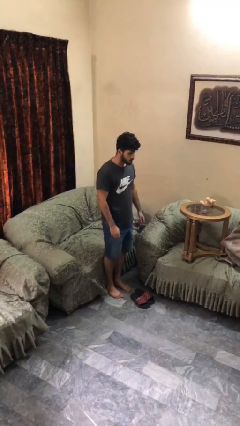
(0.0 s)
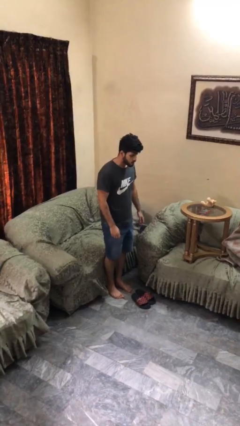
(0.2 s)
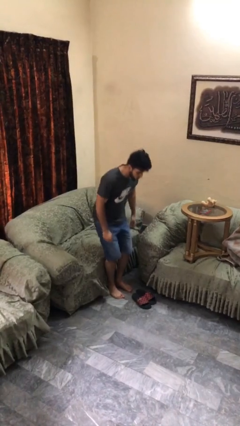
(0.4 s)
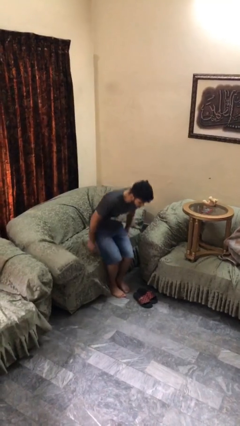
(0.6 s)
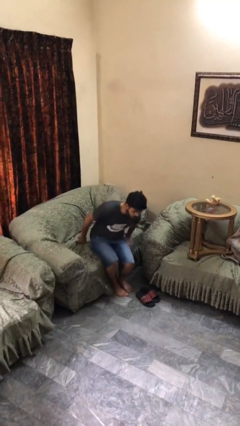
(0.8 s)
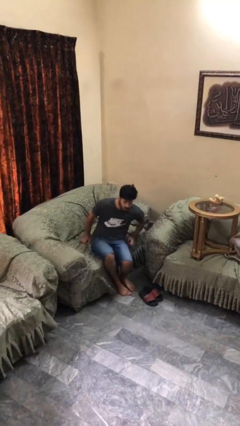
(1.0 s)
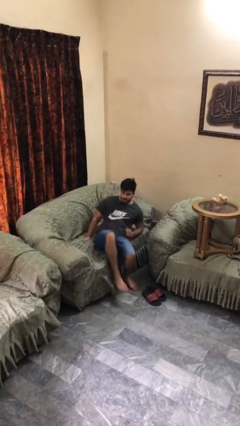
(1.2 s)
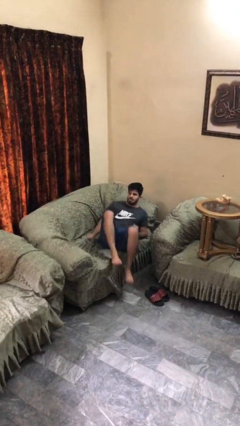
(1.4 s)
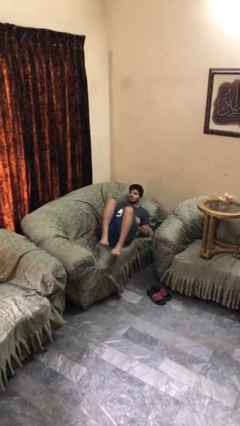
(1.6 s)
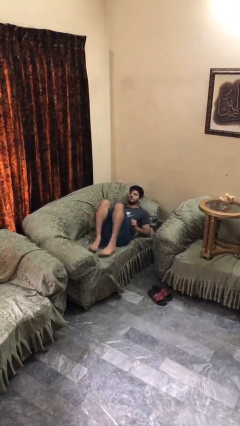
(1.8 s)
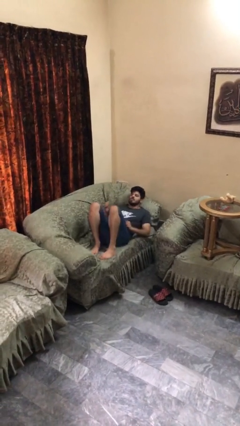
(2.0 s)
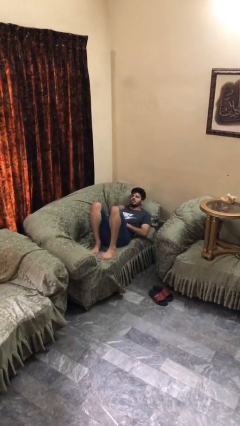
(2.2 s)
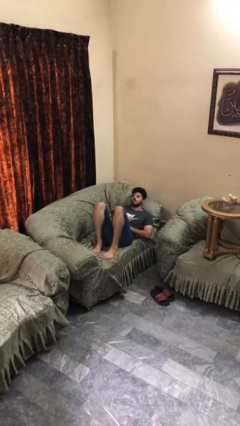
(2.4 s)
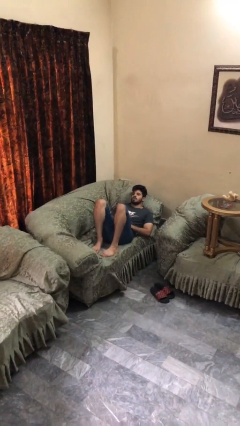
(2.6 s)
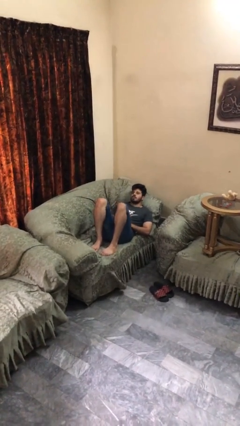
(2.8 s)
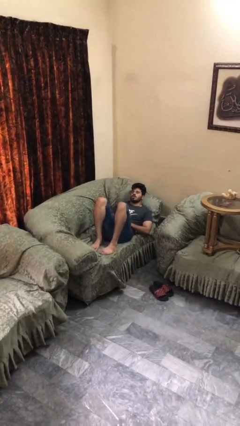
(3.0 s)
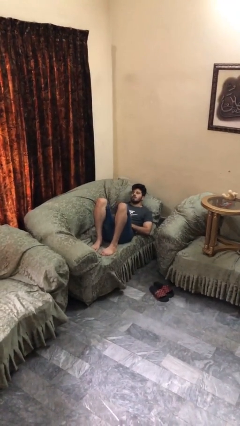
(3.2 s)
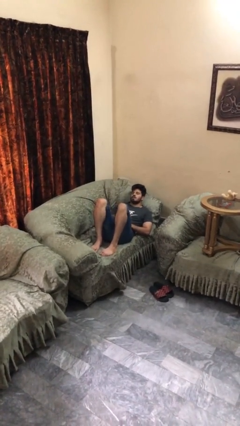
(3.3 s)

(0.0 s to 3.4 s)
person lies down on couch

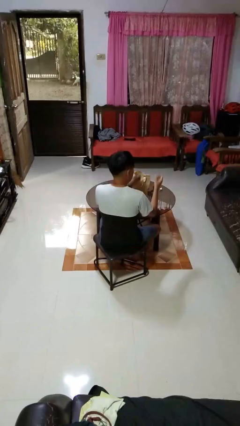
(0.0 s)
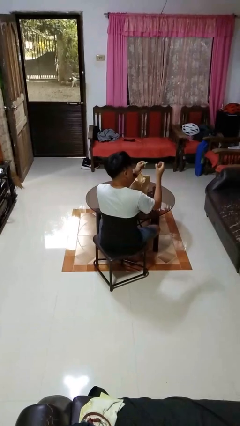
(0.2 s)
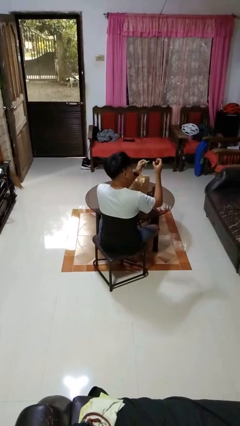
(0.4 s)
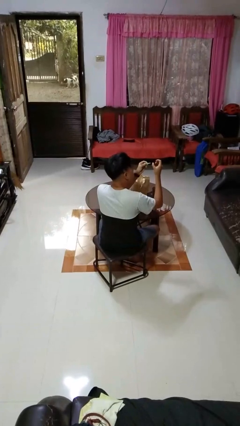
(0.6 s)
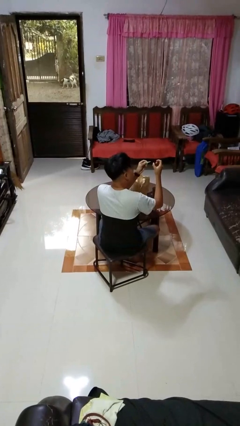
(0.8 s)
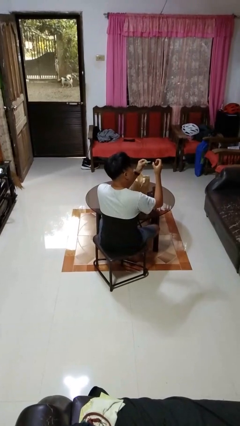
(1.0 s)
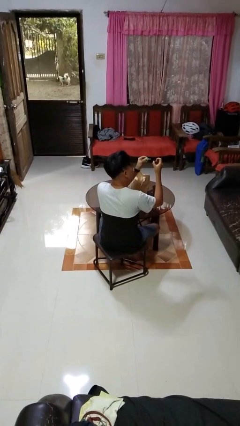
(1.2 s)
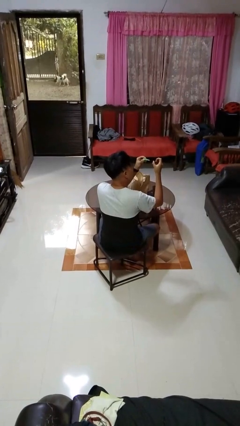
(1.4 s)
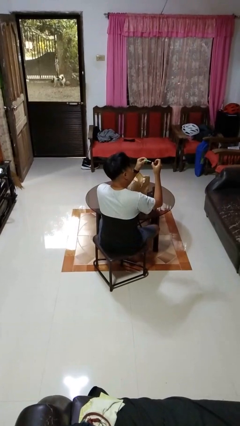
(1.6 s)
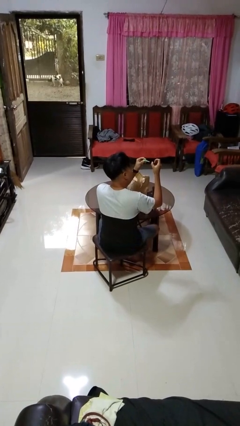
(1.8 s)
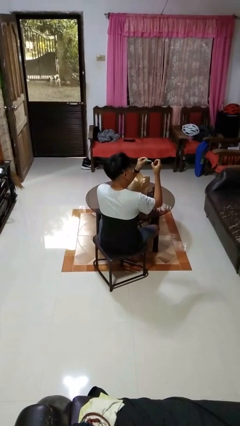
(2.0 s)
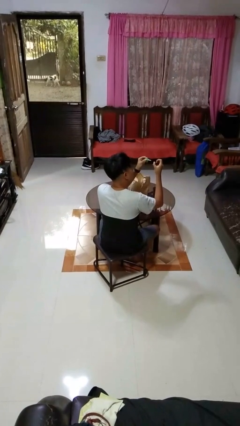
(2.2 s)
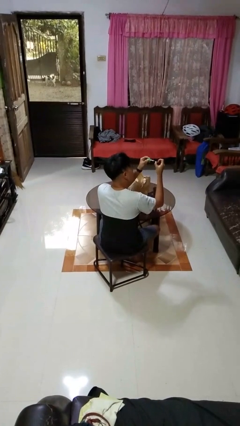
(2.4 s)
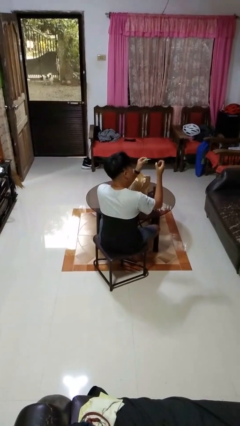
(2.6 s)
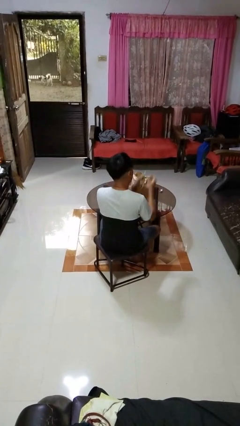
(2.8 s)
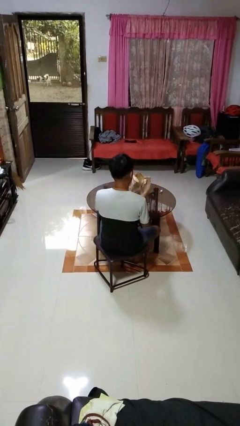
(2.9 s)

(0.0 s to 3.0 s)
person paints fingernails

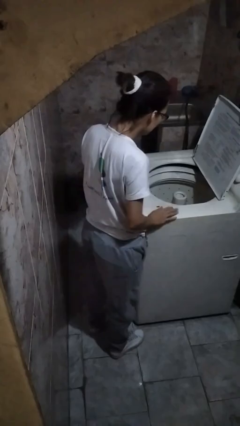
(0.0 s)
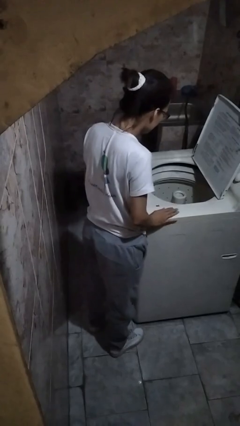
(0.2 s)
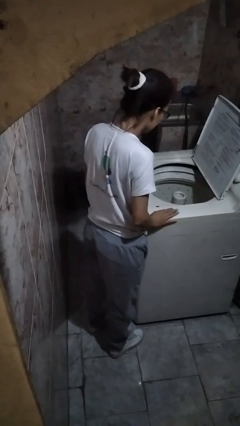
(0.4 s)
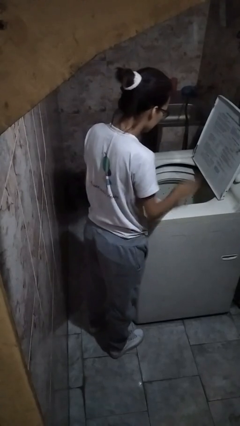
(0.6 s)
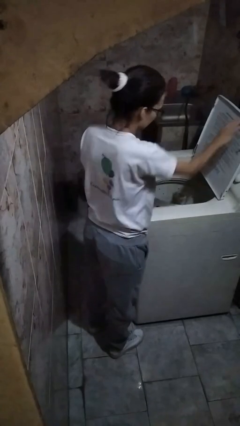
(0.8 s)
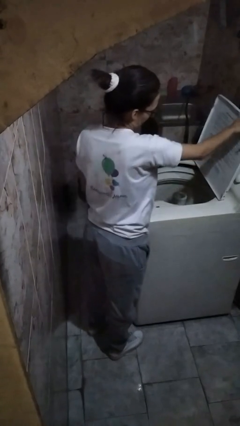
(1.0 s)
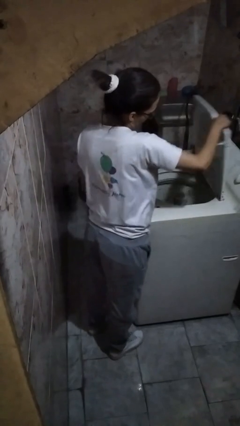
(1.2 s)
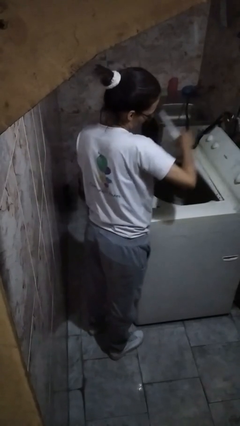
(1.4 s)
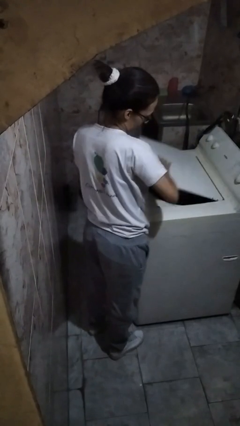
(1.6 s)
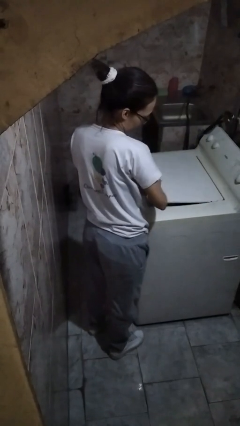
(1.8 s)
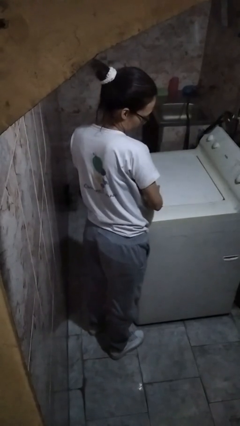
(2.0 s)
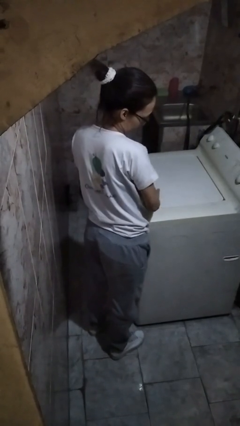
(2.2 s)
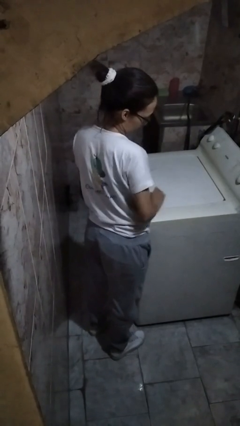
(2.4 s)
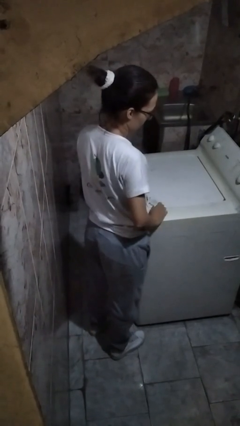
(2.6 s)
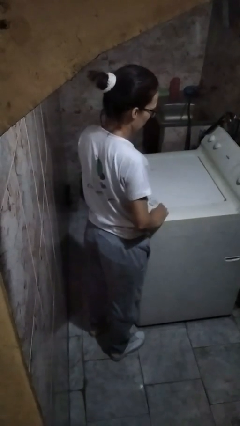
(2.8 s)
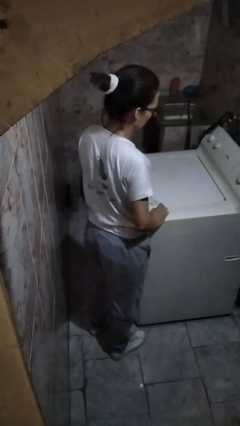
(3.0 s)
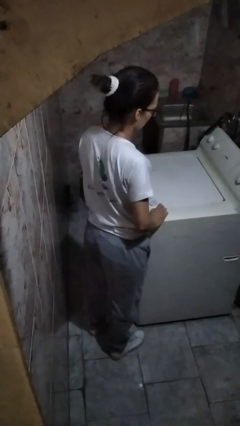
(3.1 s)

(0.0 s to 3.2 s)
person closes clothes washer

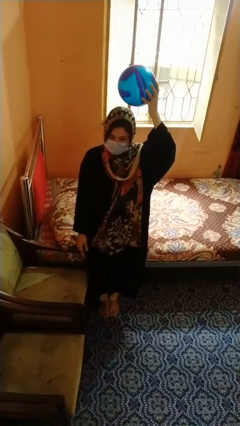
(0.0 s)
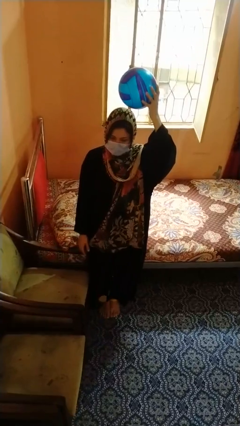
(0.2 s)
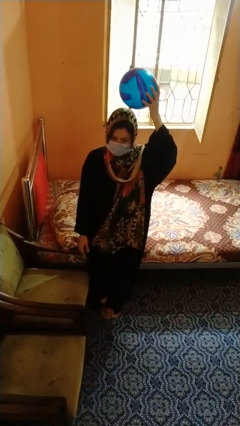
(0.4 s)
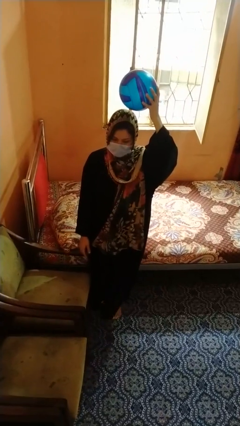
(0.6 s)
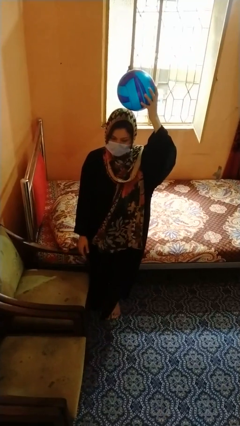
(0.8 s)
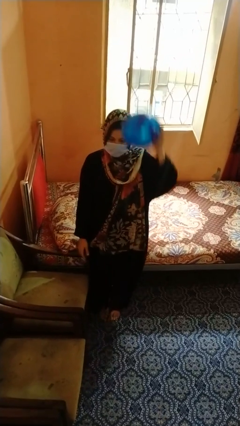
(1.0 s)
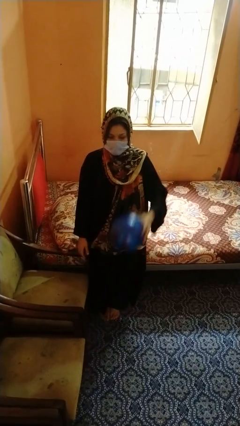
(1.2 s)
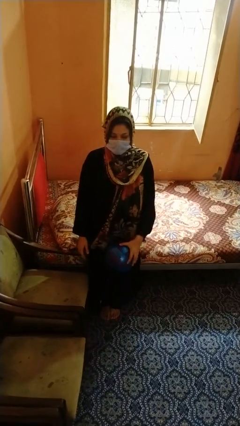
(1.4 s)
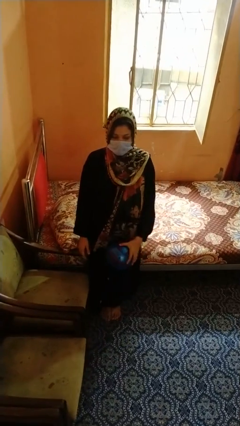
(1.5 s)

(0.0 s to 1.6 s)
person holds object above head

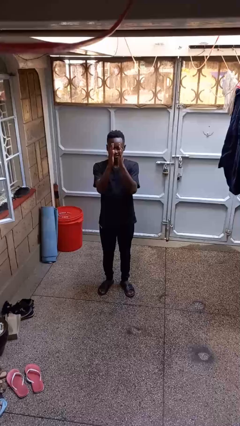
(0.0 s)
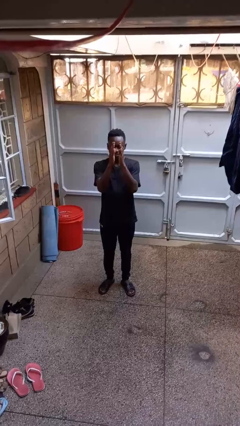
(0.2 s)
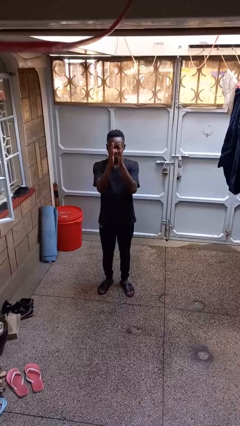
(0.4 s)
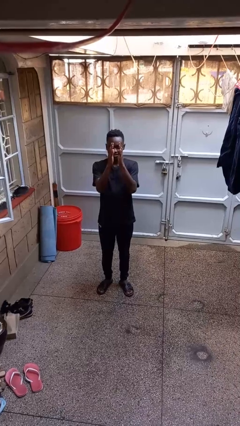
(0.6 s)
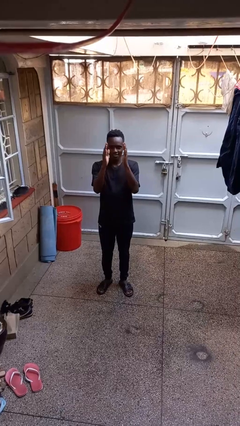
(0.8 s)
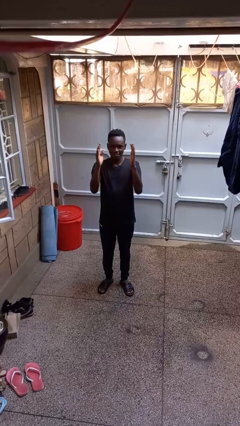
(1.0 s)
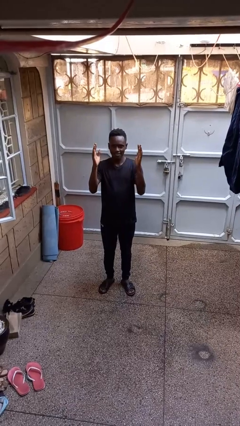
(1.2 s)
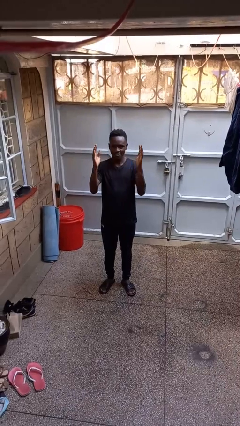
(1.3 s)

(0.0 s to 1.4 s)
person gestures zoom out

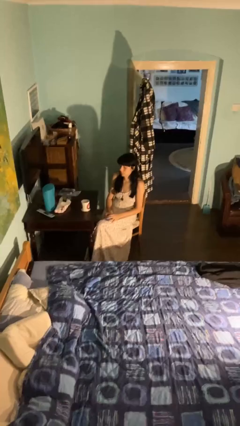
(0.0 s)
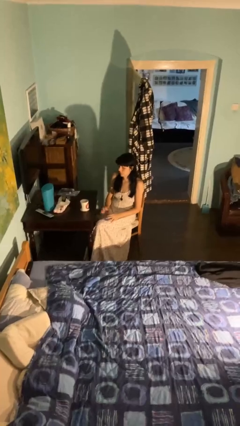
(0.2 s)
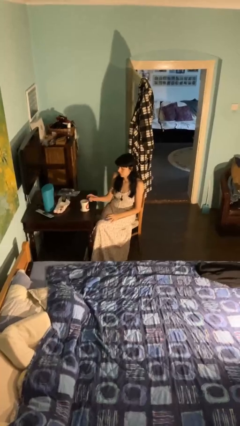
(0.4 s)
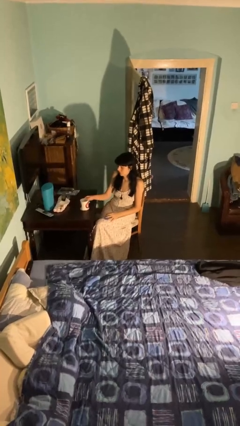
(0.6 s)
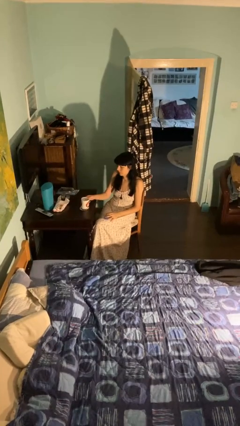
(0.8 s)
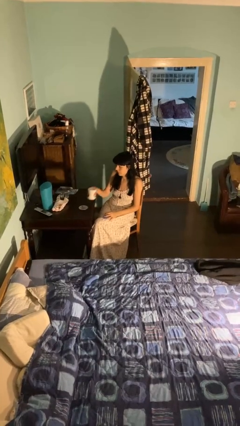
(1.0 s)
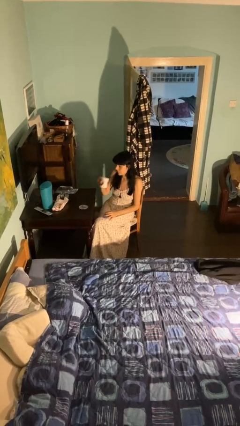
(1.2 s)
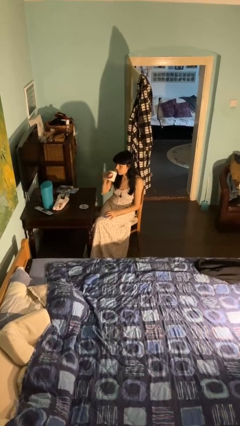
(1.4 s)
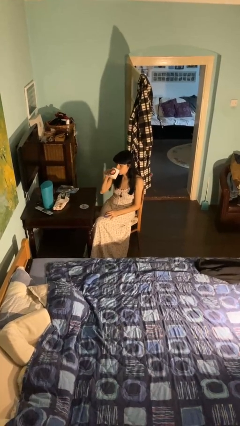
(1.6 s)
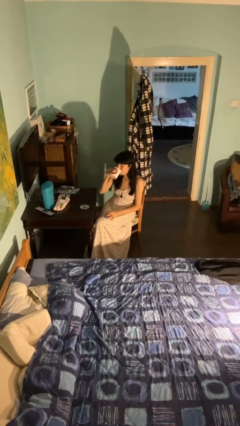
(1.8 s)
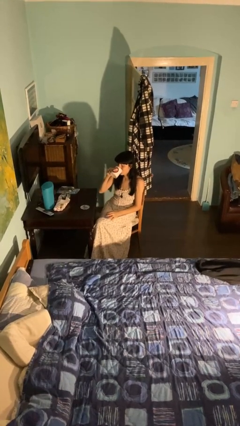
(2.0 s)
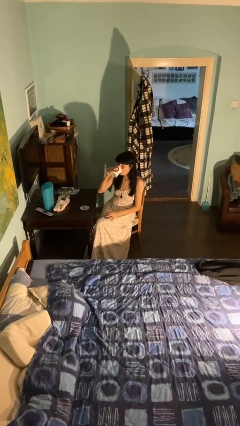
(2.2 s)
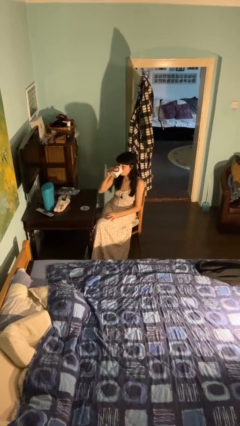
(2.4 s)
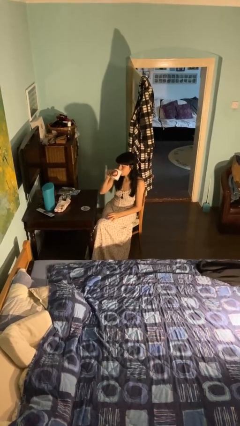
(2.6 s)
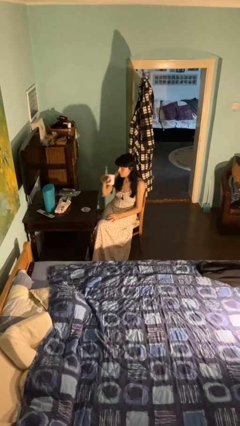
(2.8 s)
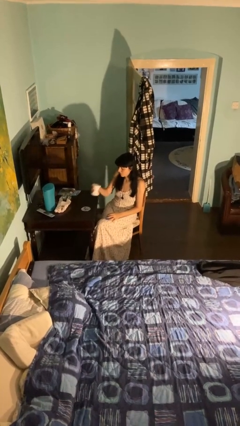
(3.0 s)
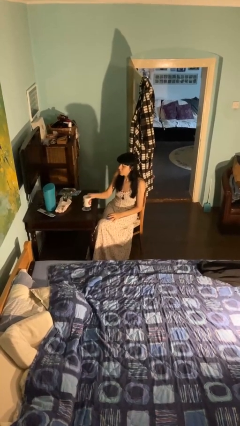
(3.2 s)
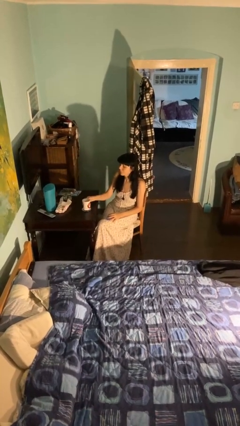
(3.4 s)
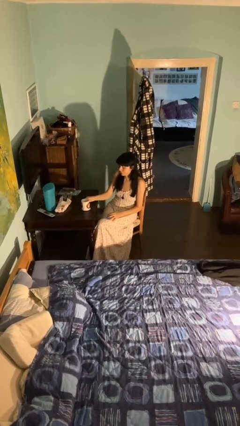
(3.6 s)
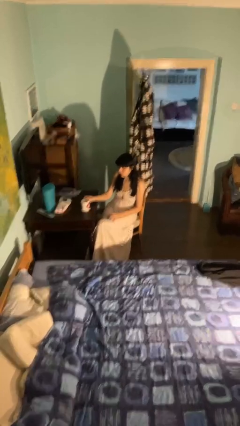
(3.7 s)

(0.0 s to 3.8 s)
person drinks from cup

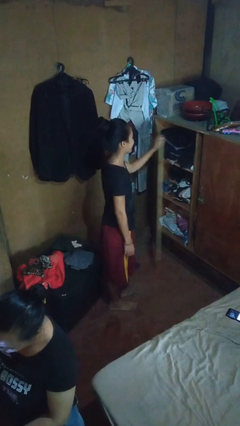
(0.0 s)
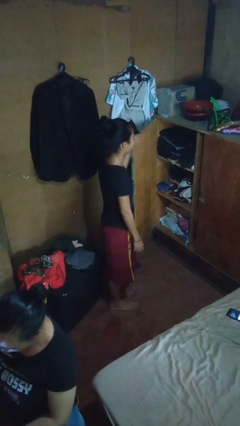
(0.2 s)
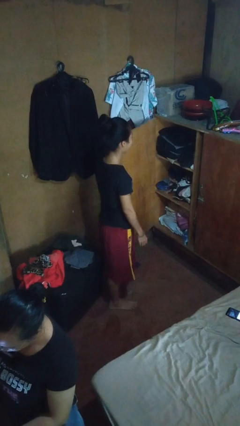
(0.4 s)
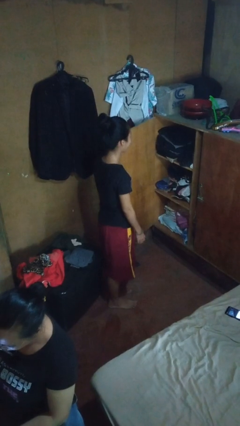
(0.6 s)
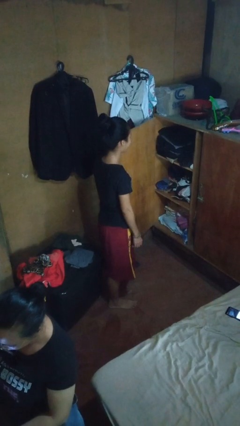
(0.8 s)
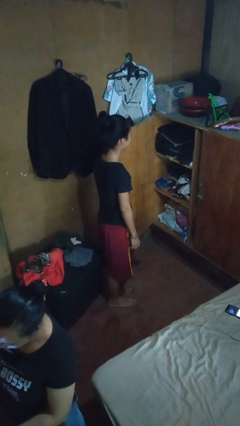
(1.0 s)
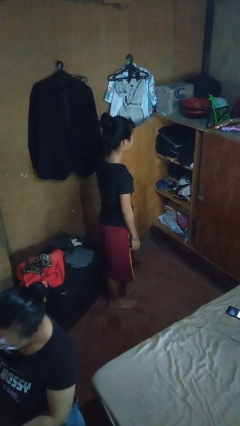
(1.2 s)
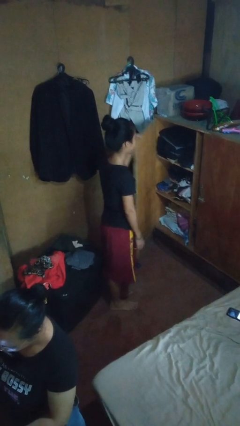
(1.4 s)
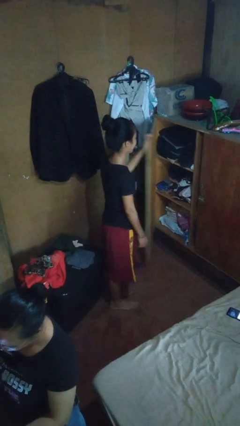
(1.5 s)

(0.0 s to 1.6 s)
person opens closet door
